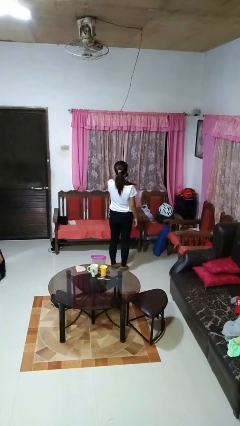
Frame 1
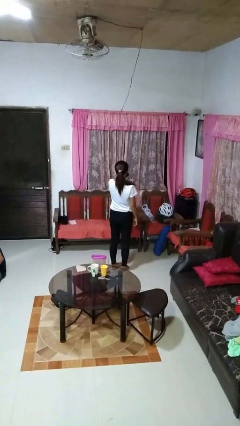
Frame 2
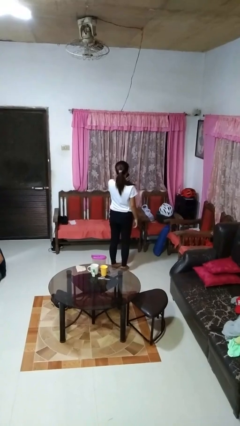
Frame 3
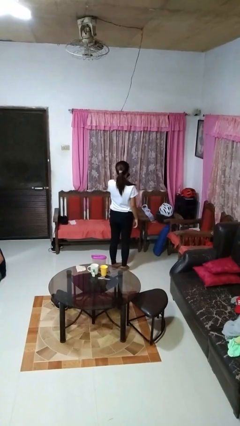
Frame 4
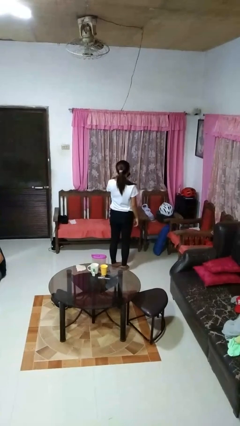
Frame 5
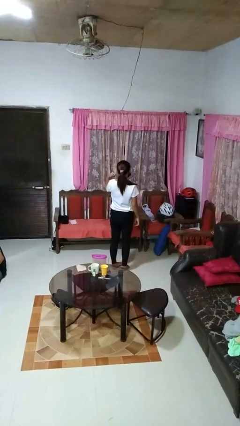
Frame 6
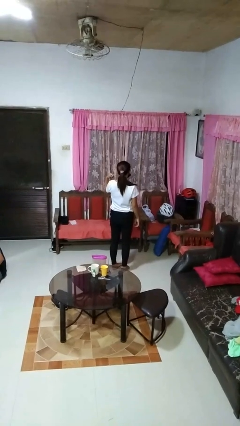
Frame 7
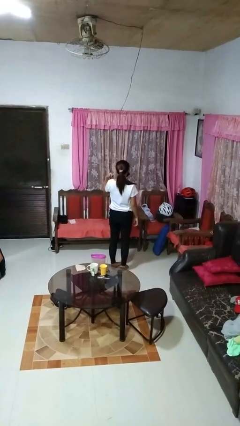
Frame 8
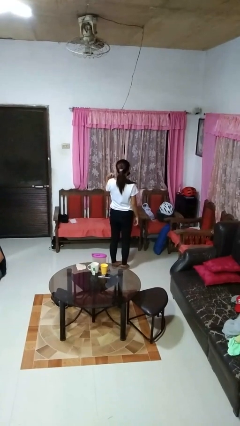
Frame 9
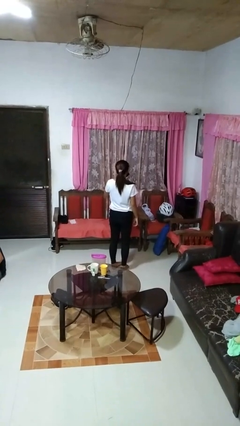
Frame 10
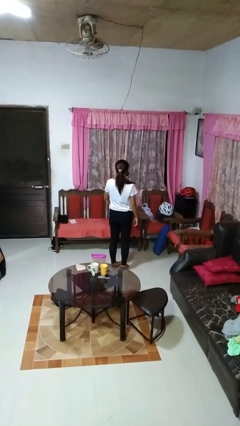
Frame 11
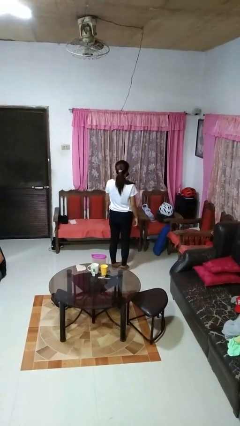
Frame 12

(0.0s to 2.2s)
person gestures cut

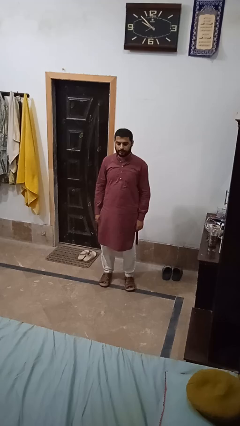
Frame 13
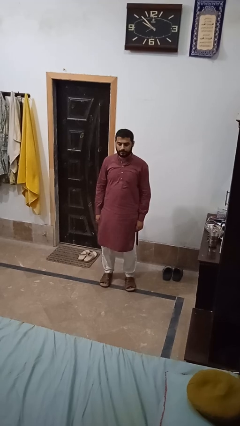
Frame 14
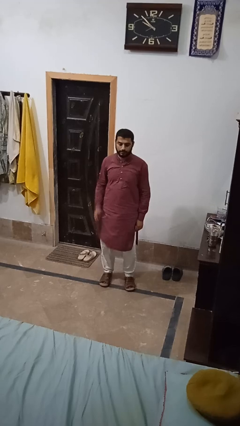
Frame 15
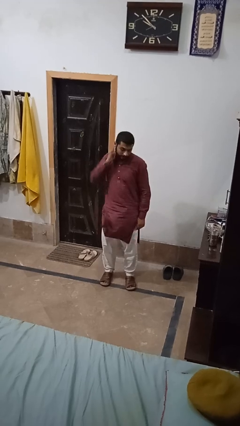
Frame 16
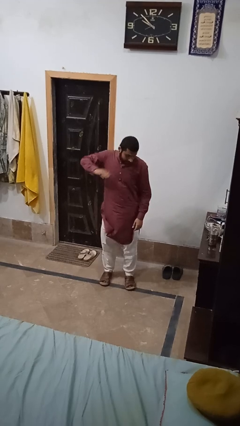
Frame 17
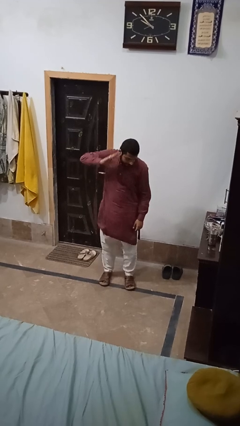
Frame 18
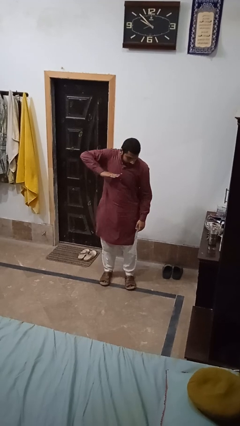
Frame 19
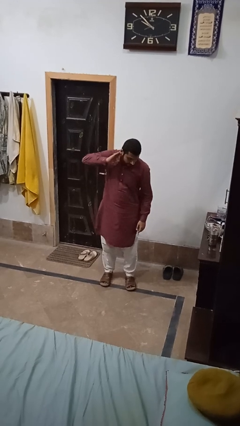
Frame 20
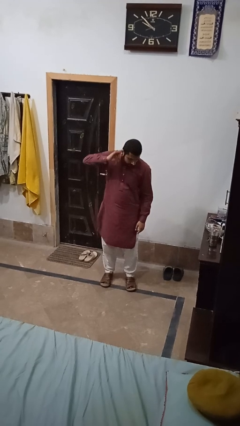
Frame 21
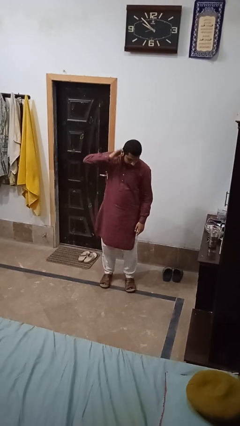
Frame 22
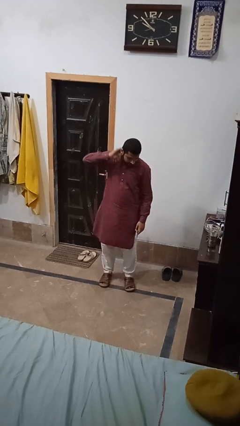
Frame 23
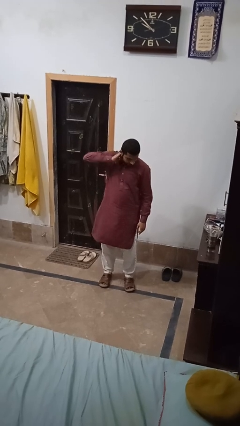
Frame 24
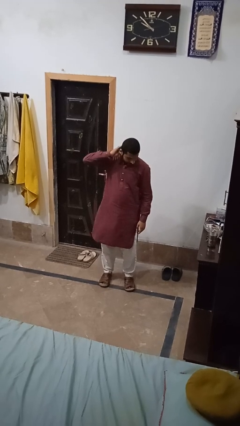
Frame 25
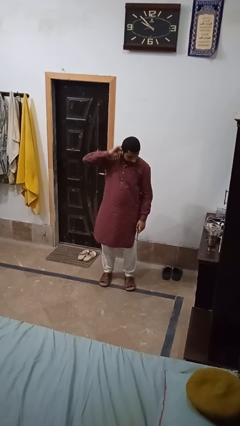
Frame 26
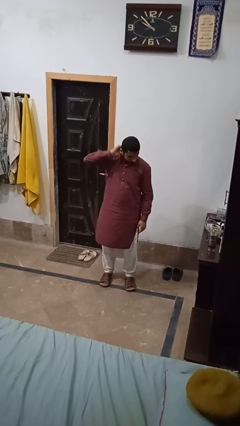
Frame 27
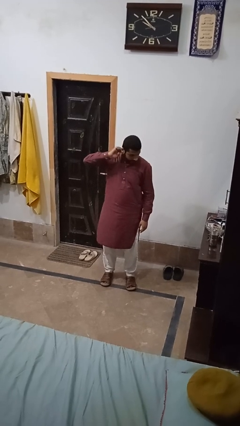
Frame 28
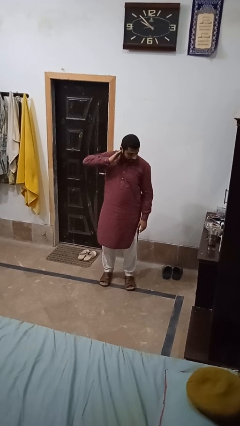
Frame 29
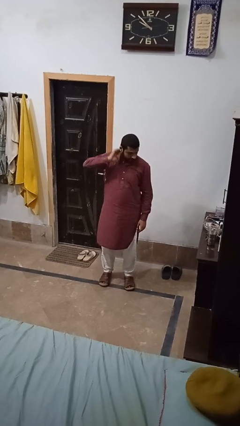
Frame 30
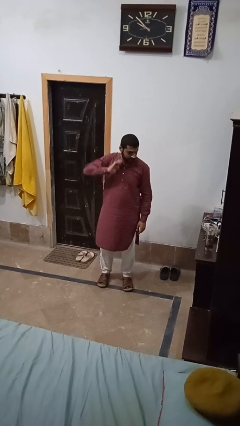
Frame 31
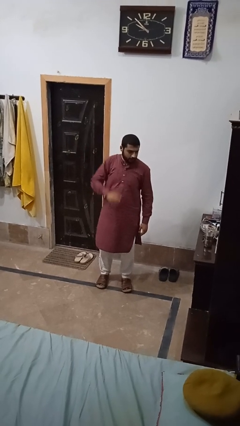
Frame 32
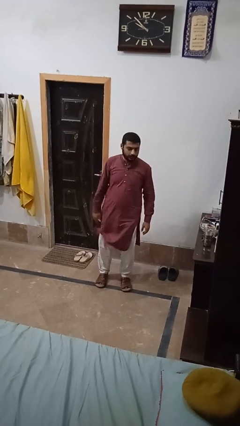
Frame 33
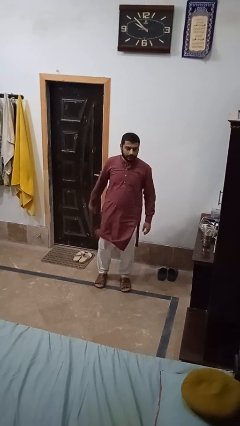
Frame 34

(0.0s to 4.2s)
person swats bug

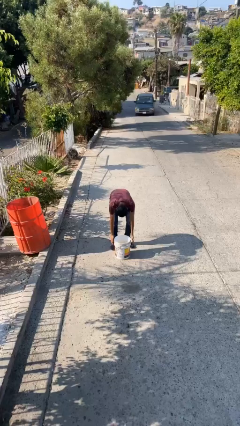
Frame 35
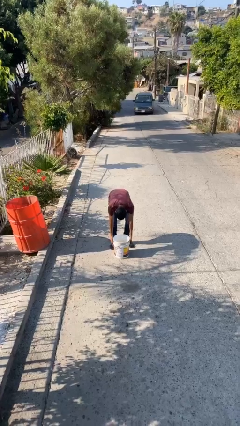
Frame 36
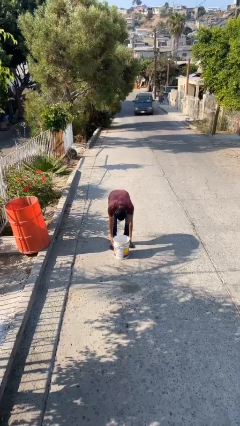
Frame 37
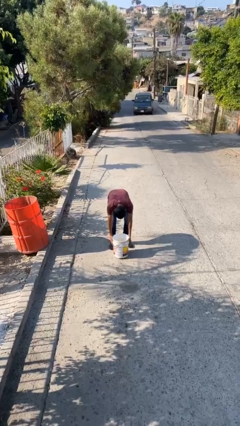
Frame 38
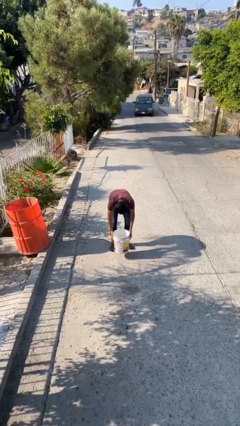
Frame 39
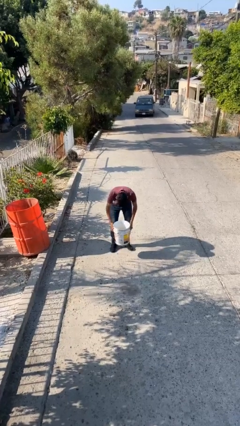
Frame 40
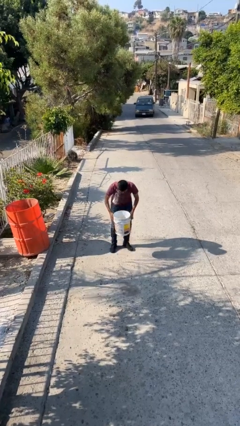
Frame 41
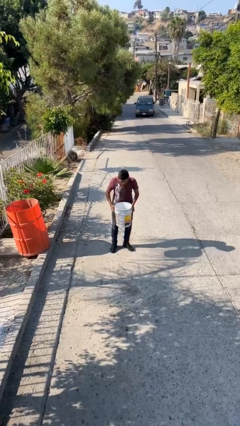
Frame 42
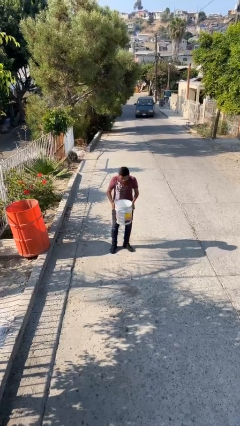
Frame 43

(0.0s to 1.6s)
person picks up object from floor

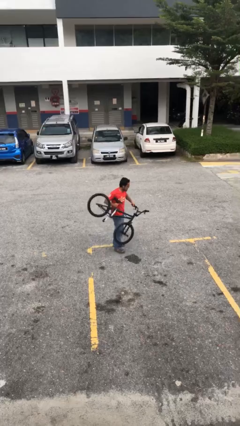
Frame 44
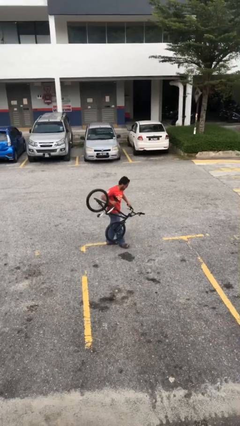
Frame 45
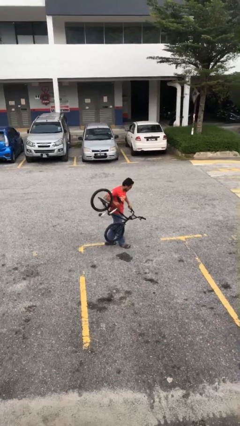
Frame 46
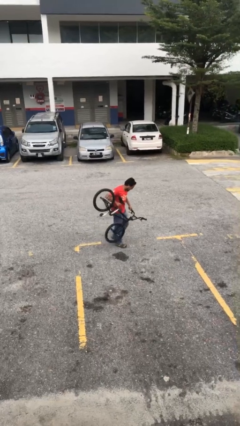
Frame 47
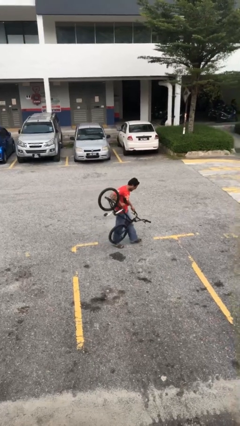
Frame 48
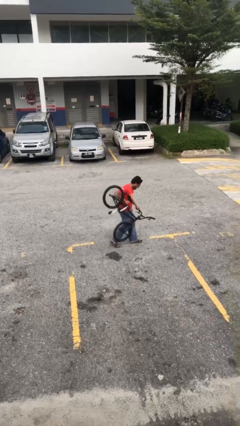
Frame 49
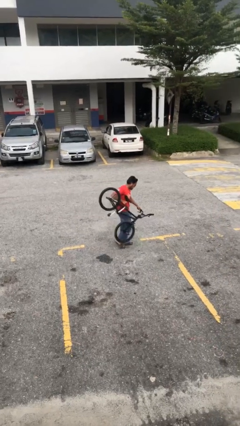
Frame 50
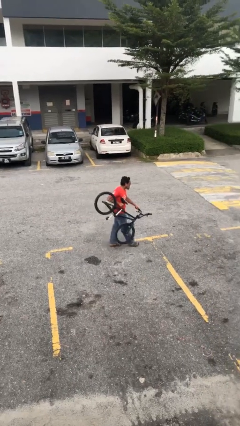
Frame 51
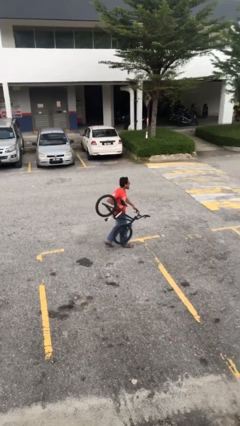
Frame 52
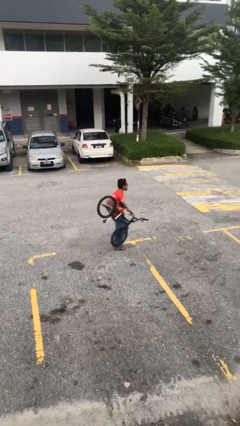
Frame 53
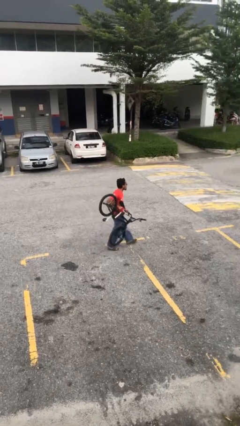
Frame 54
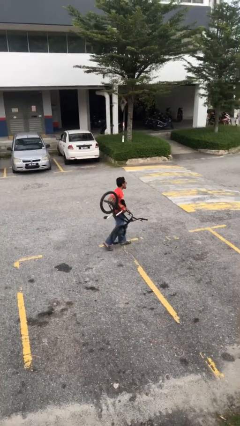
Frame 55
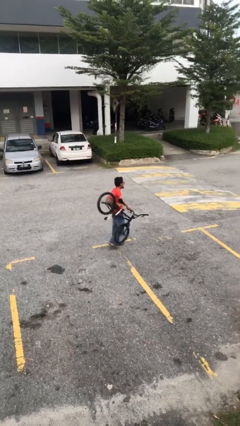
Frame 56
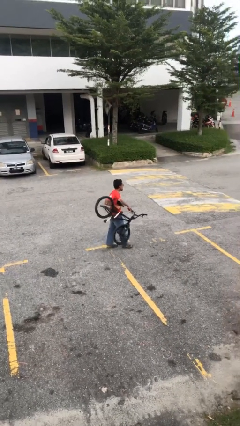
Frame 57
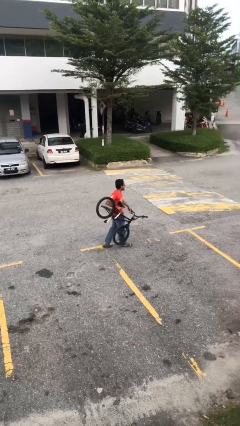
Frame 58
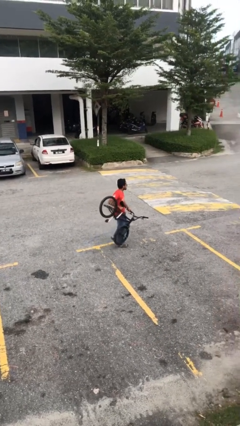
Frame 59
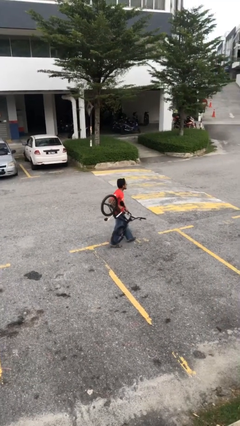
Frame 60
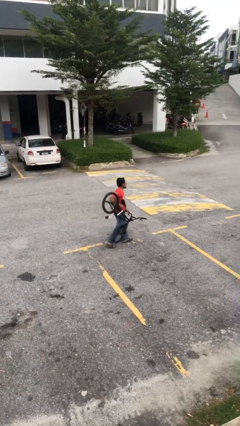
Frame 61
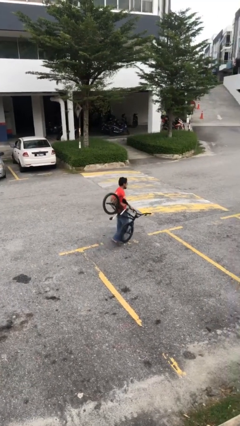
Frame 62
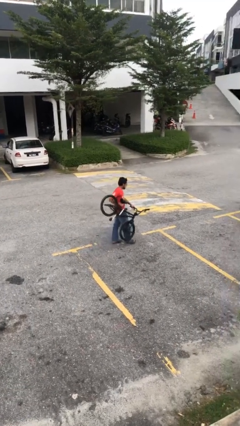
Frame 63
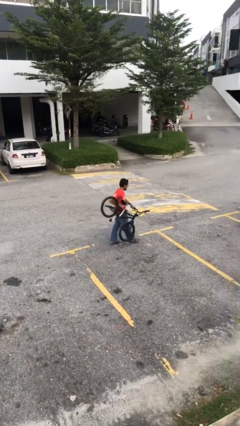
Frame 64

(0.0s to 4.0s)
person carries heavy object

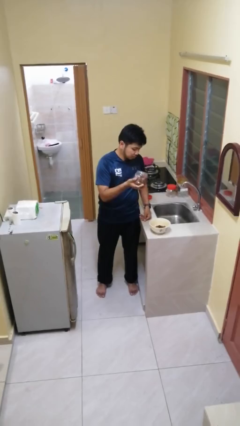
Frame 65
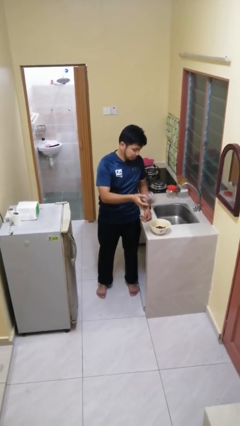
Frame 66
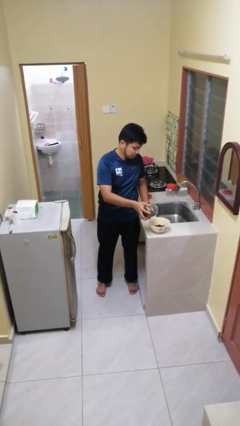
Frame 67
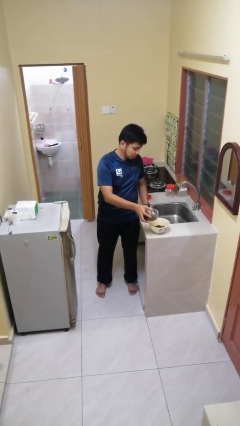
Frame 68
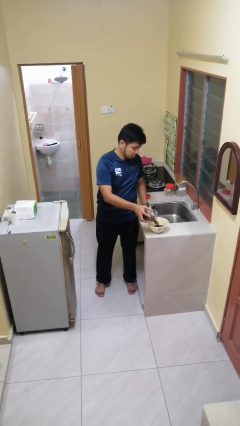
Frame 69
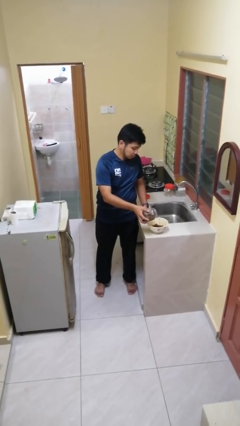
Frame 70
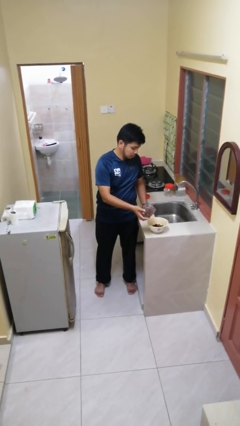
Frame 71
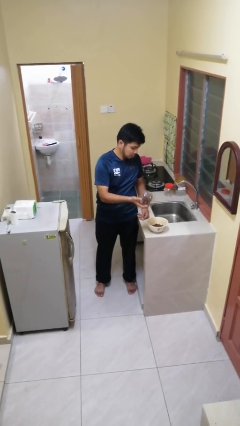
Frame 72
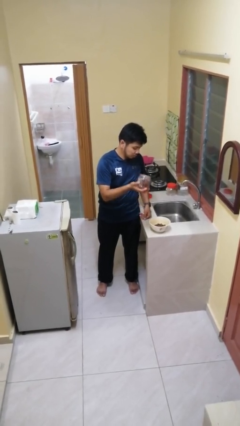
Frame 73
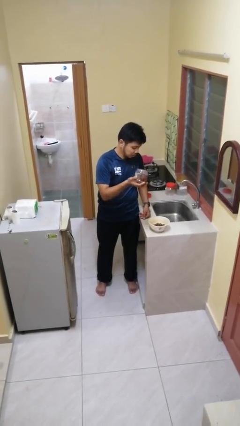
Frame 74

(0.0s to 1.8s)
person pours into bowl

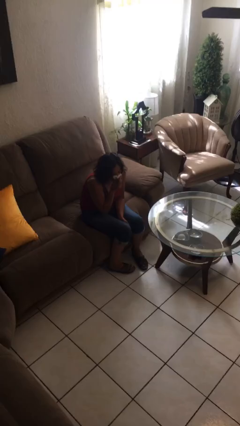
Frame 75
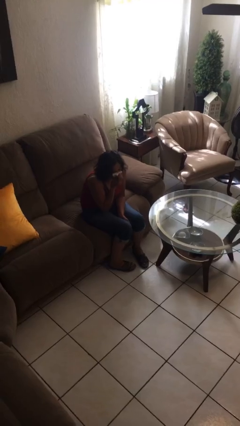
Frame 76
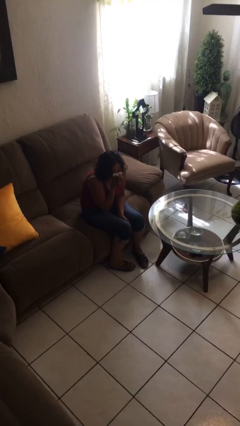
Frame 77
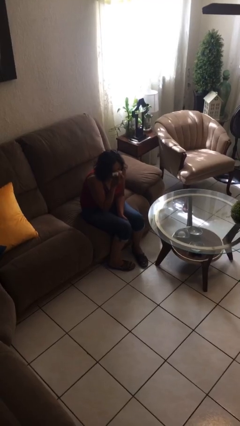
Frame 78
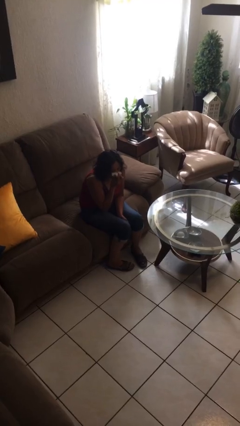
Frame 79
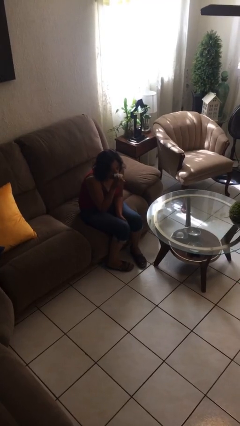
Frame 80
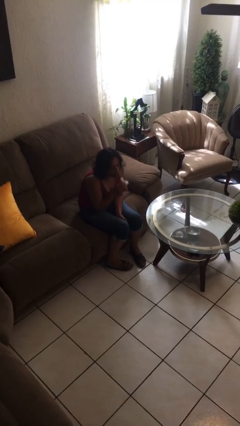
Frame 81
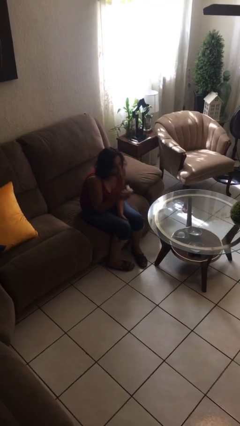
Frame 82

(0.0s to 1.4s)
person blows nose

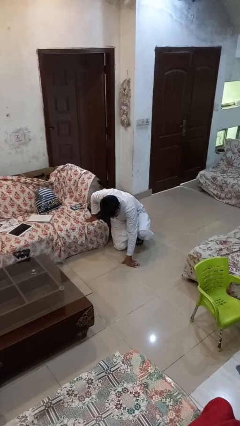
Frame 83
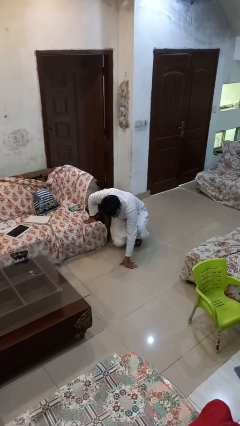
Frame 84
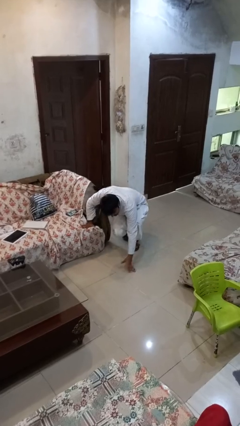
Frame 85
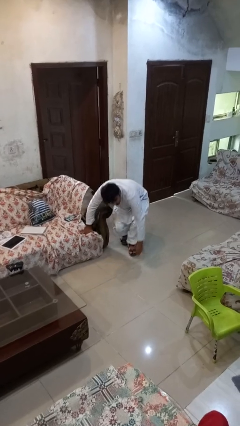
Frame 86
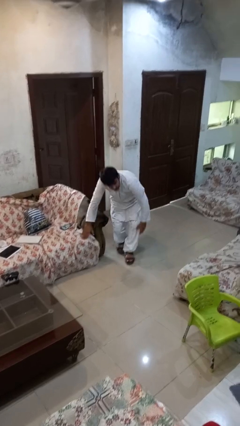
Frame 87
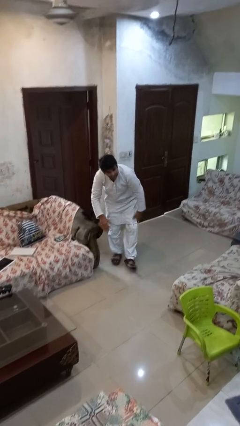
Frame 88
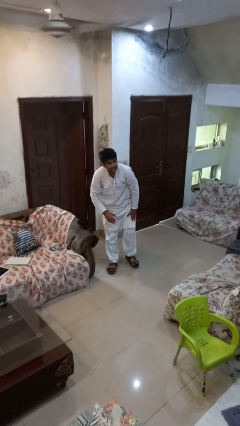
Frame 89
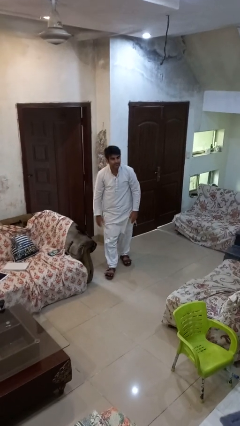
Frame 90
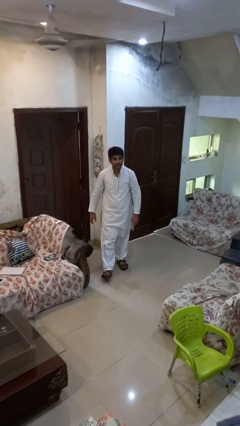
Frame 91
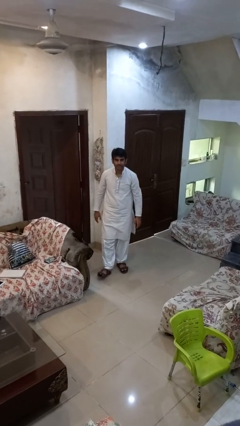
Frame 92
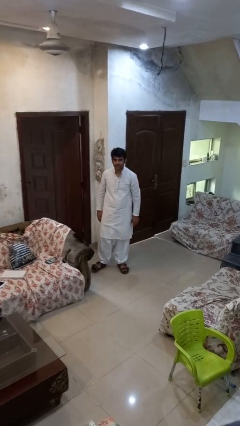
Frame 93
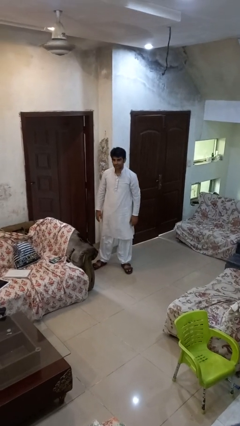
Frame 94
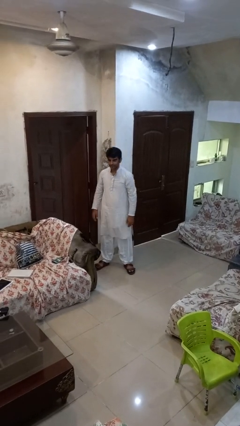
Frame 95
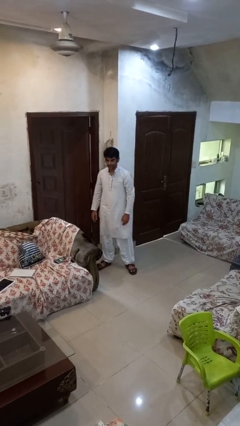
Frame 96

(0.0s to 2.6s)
person stands up from floor
